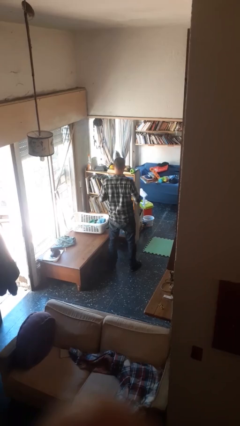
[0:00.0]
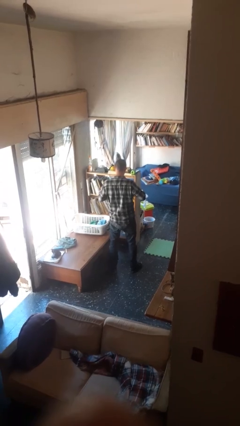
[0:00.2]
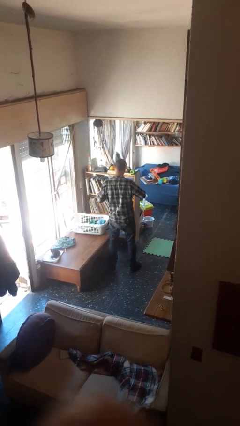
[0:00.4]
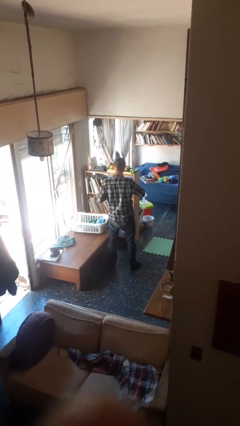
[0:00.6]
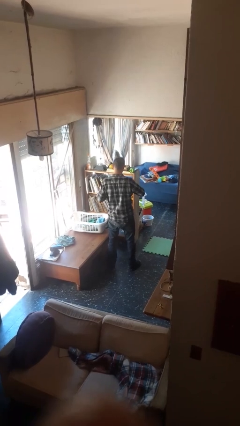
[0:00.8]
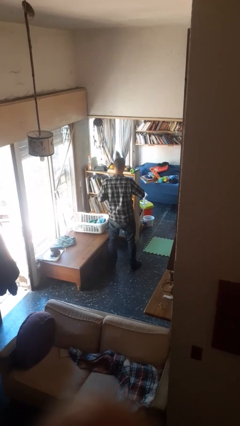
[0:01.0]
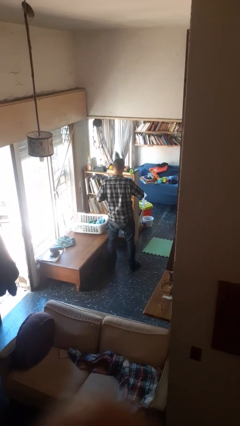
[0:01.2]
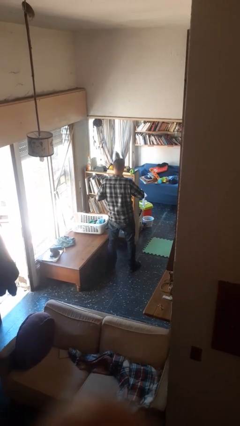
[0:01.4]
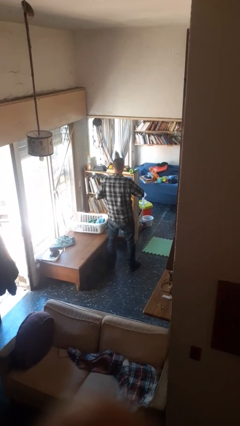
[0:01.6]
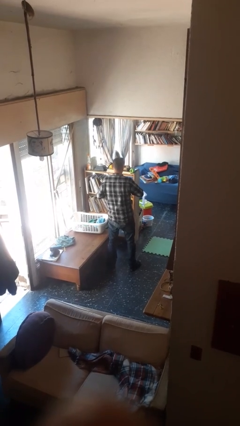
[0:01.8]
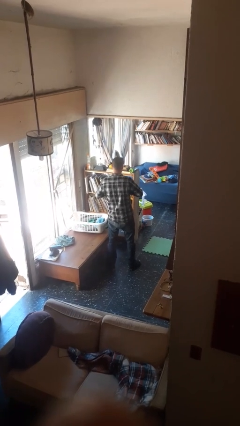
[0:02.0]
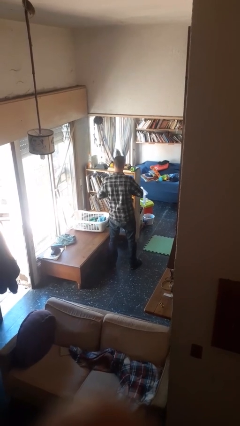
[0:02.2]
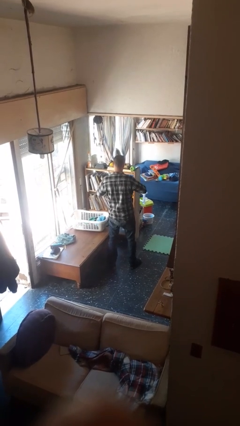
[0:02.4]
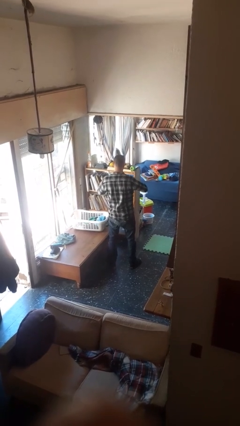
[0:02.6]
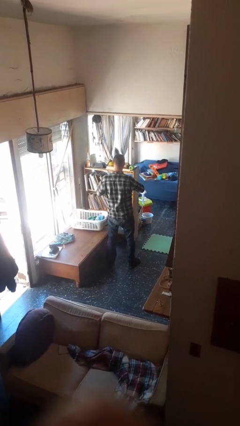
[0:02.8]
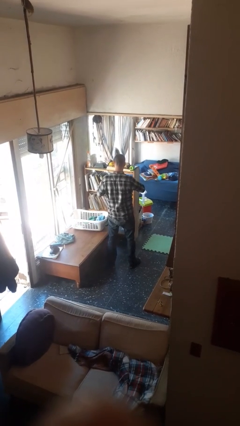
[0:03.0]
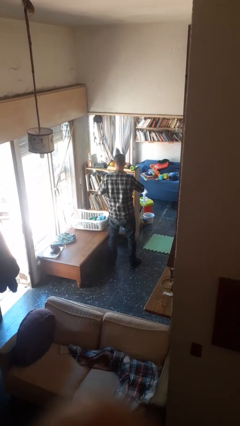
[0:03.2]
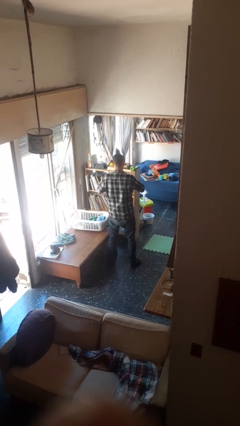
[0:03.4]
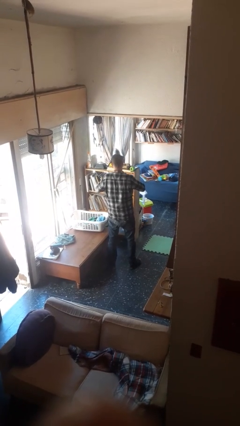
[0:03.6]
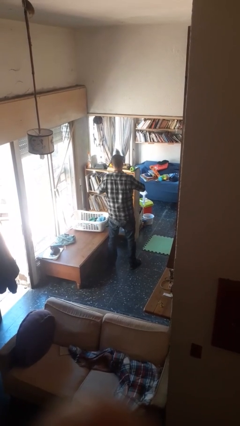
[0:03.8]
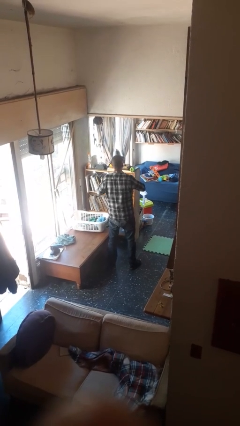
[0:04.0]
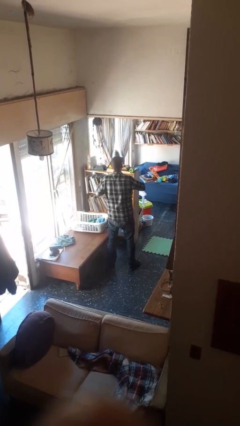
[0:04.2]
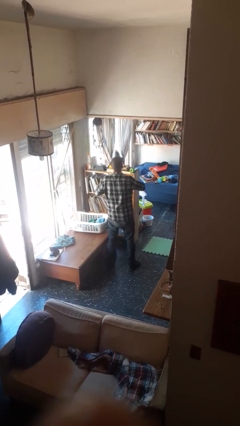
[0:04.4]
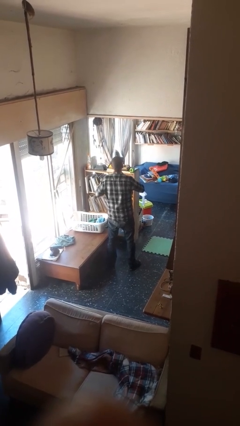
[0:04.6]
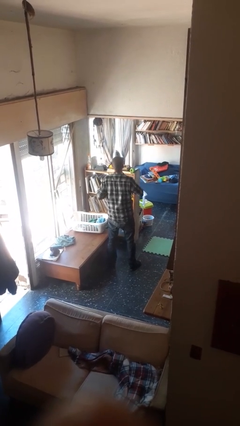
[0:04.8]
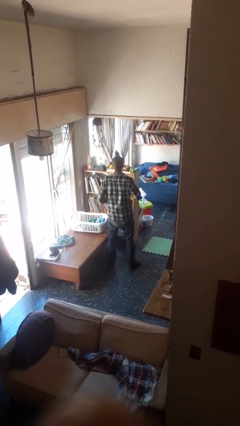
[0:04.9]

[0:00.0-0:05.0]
person buttons shirt

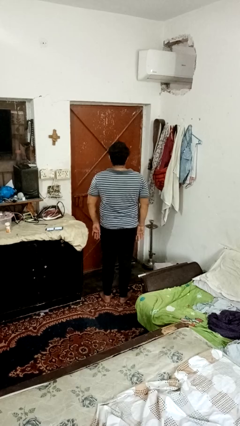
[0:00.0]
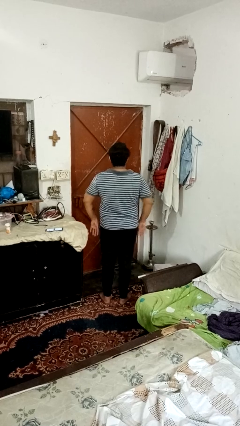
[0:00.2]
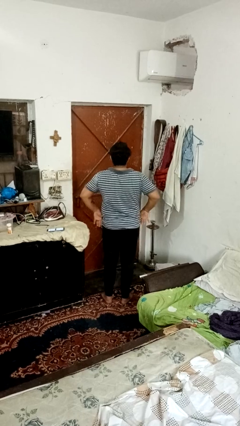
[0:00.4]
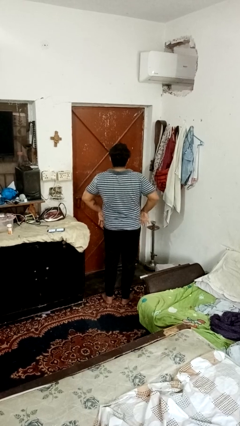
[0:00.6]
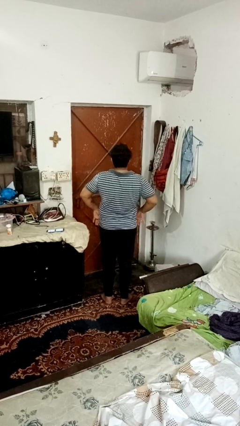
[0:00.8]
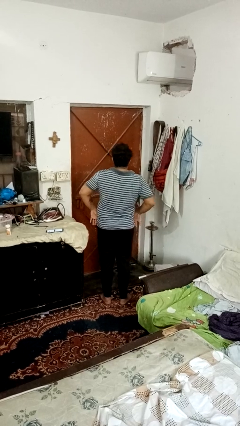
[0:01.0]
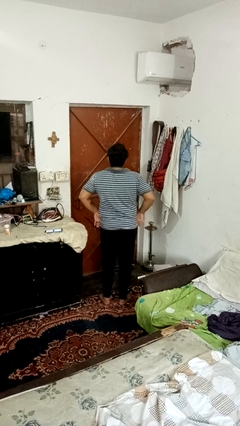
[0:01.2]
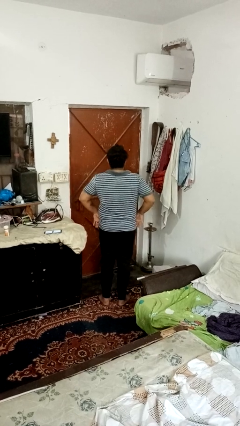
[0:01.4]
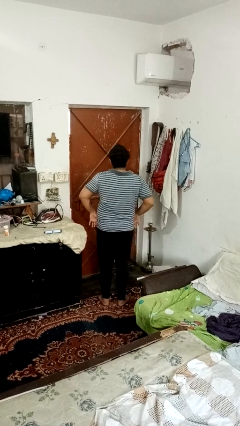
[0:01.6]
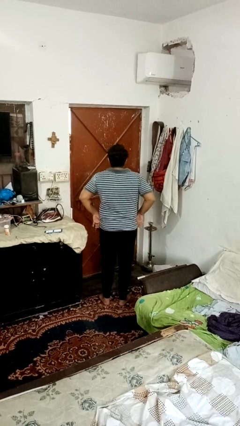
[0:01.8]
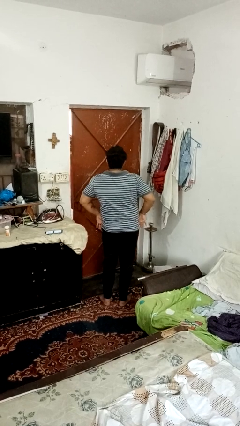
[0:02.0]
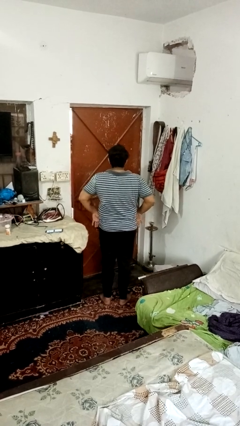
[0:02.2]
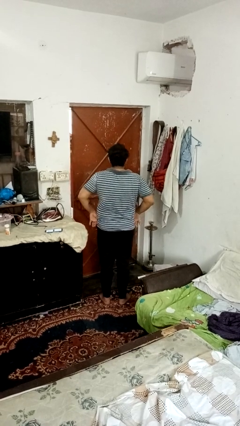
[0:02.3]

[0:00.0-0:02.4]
person wiggles hips

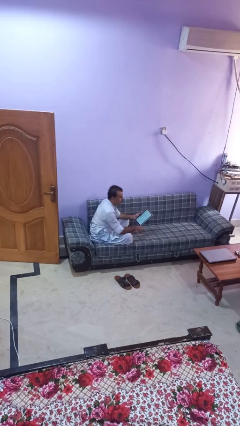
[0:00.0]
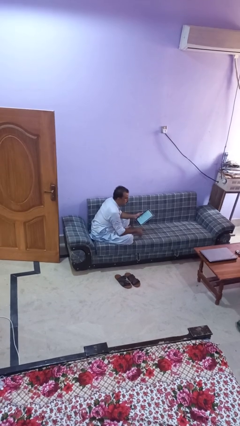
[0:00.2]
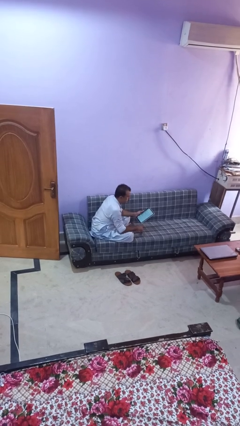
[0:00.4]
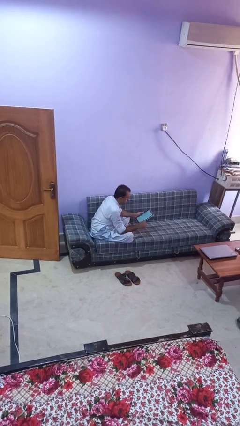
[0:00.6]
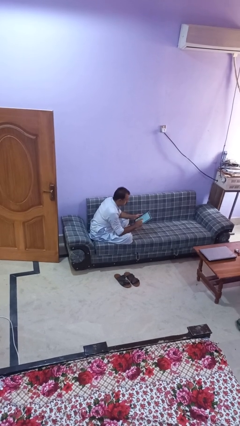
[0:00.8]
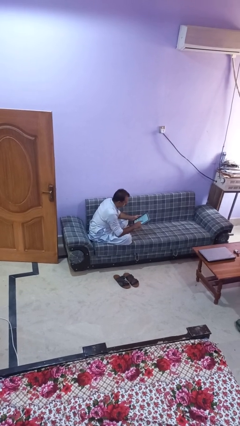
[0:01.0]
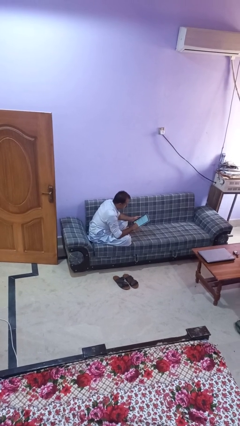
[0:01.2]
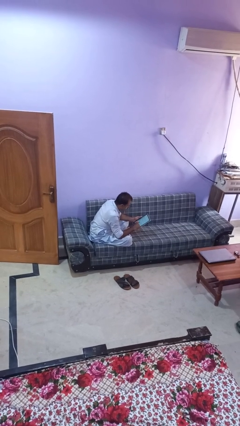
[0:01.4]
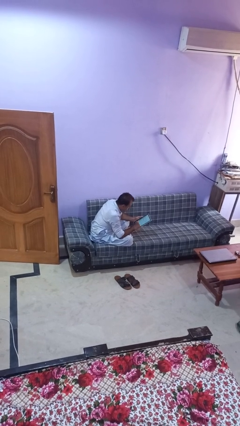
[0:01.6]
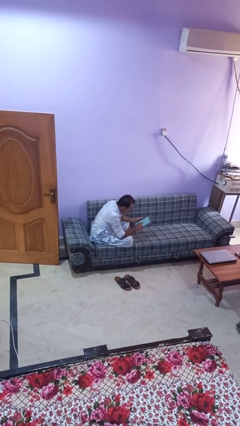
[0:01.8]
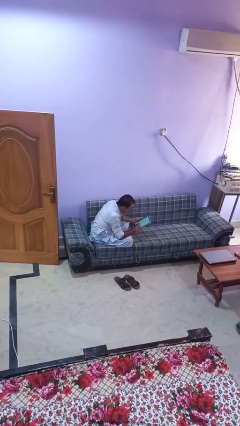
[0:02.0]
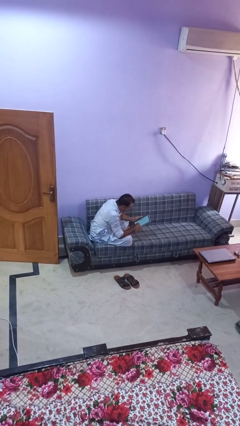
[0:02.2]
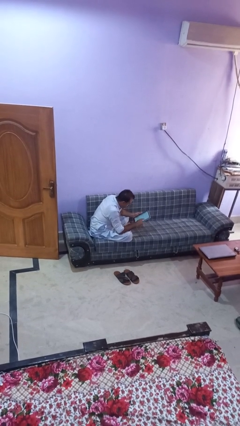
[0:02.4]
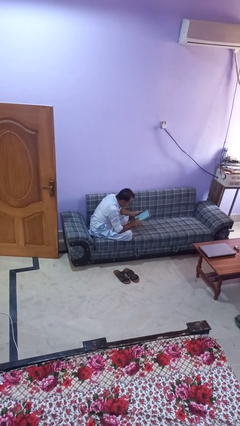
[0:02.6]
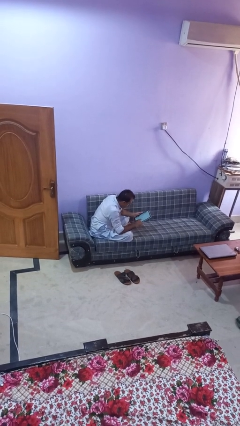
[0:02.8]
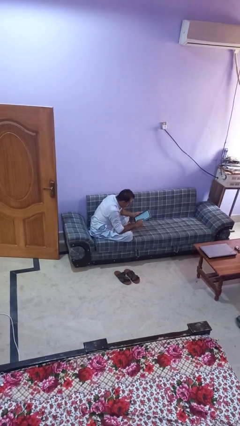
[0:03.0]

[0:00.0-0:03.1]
person interacts with tablet

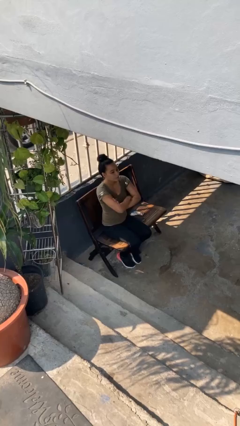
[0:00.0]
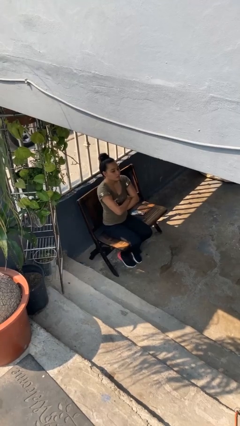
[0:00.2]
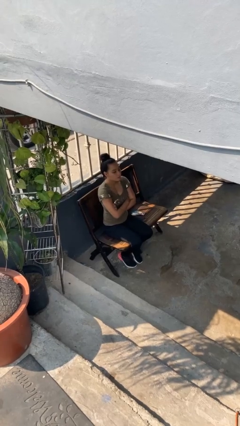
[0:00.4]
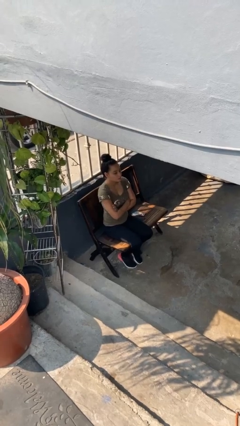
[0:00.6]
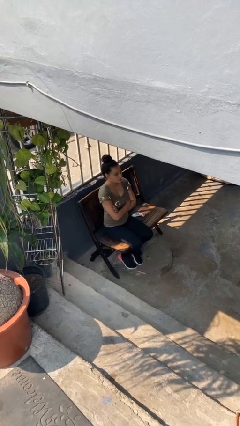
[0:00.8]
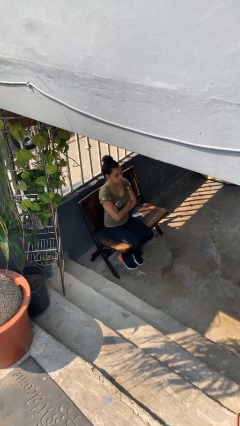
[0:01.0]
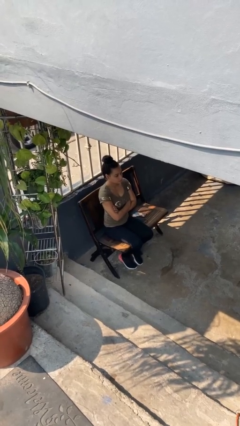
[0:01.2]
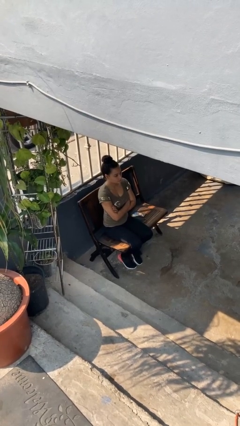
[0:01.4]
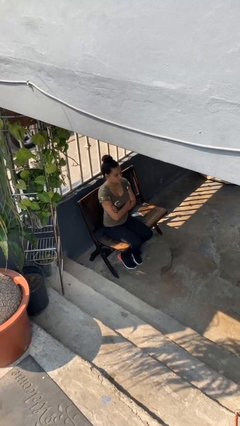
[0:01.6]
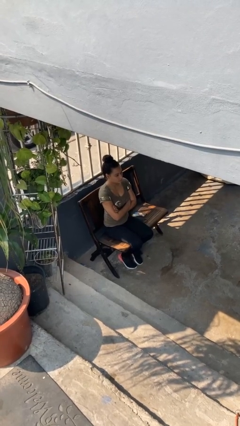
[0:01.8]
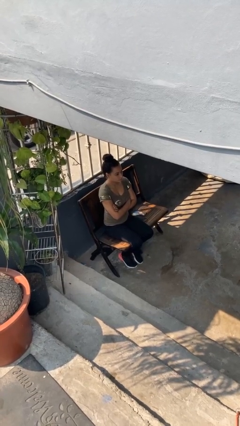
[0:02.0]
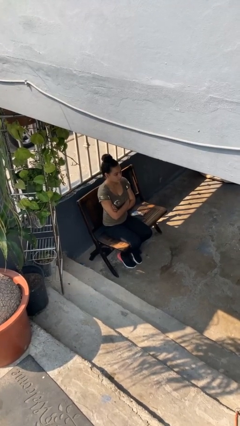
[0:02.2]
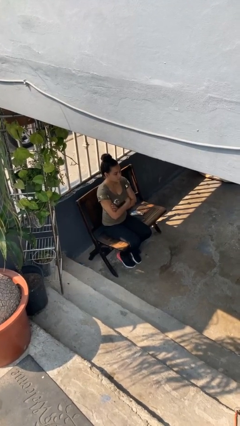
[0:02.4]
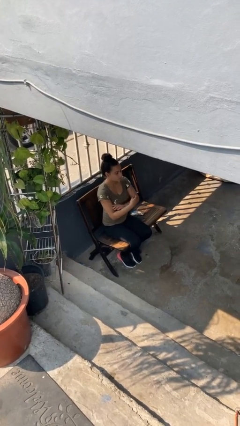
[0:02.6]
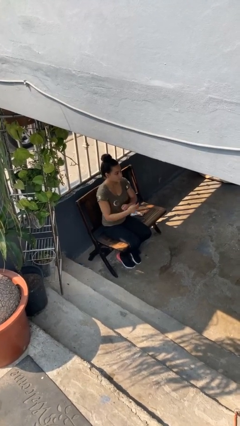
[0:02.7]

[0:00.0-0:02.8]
person crosses arms

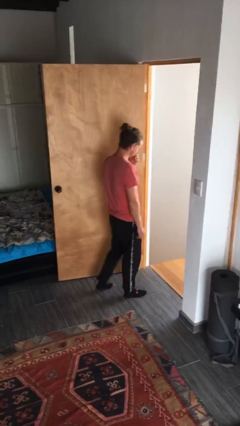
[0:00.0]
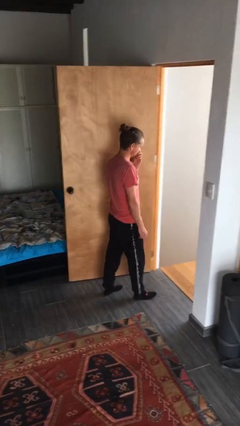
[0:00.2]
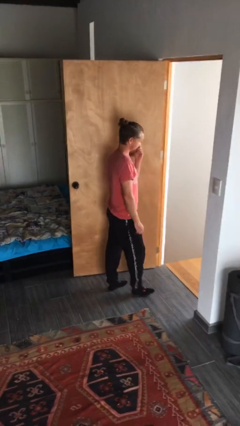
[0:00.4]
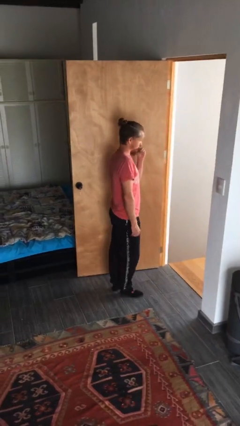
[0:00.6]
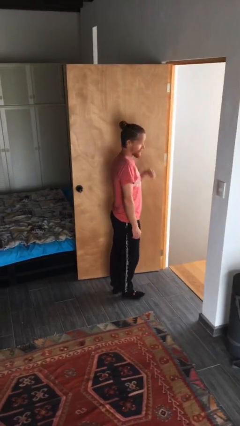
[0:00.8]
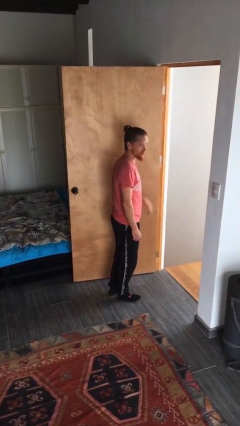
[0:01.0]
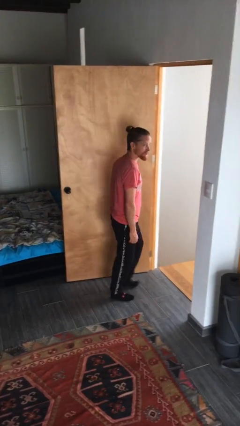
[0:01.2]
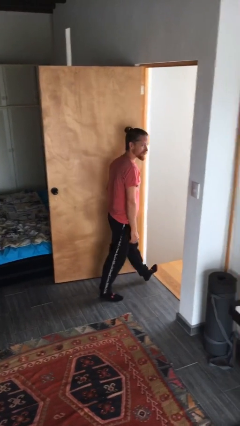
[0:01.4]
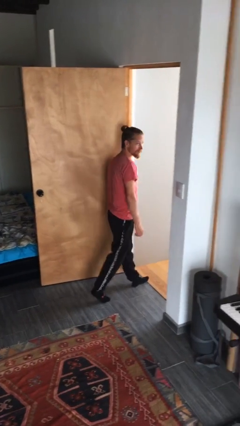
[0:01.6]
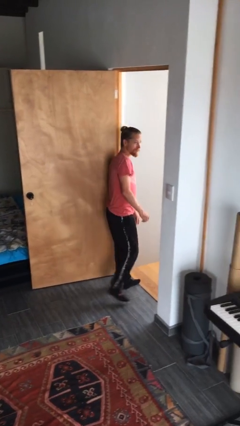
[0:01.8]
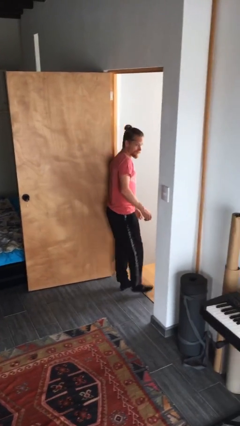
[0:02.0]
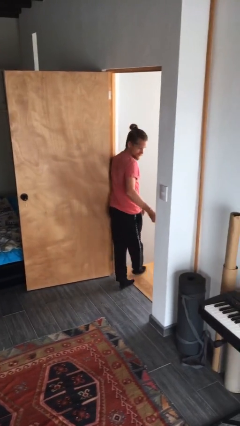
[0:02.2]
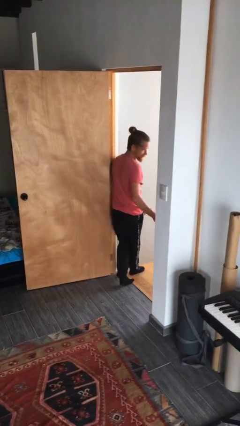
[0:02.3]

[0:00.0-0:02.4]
person bumps into wall

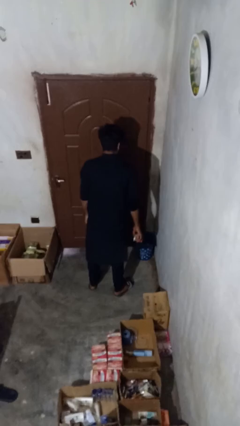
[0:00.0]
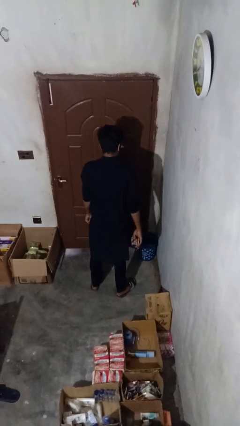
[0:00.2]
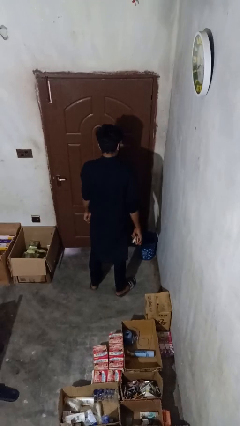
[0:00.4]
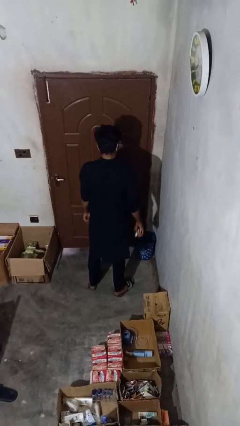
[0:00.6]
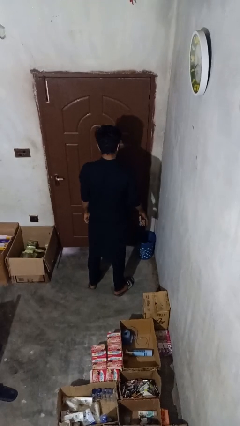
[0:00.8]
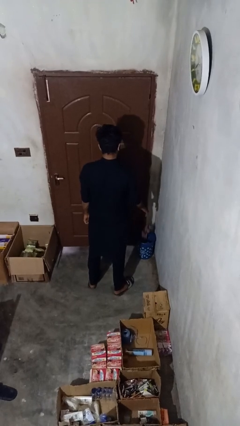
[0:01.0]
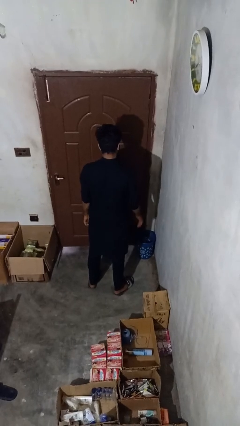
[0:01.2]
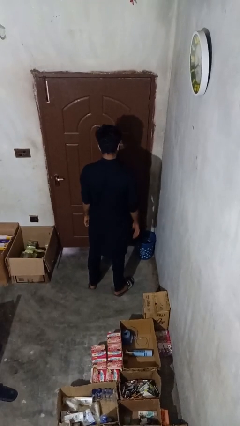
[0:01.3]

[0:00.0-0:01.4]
person discards trash

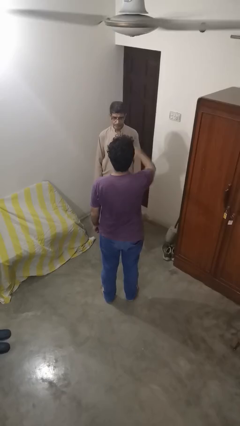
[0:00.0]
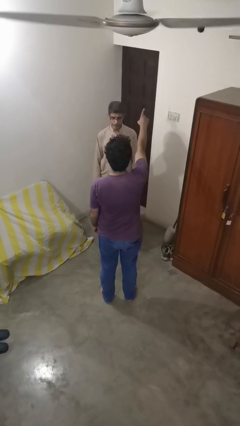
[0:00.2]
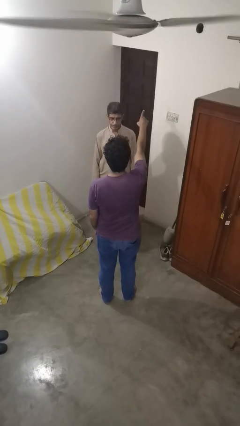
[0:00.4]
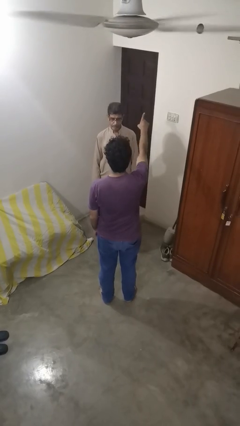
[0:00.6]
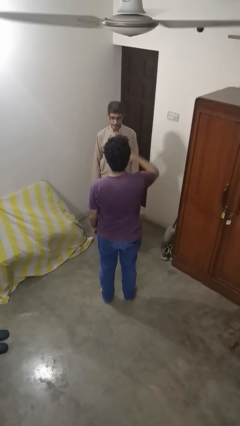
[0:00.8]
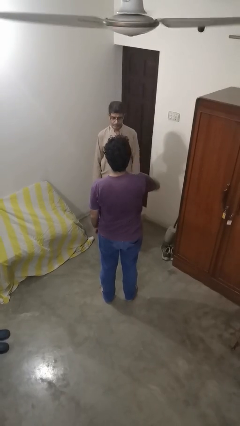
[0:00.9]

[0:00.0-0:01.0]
person shoves person
